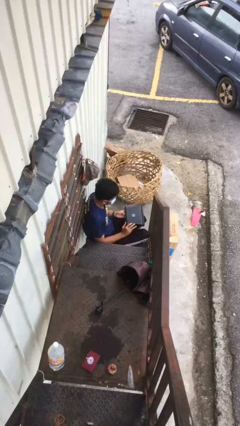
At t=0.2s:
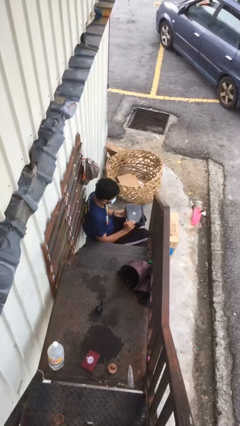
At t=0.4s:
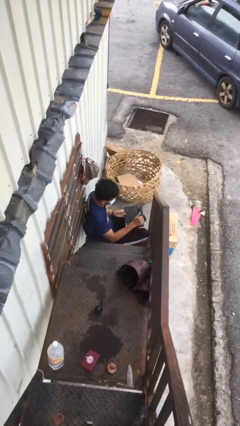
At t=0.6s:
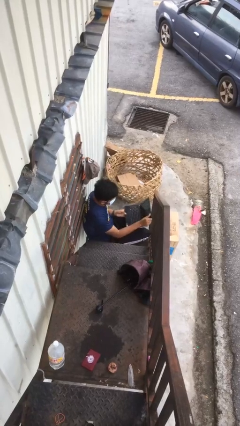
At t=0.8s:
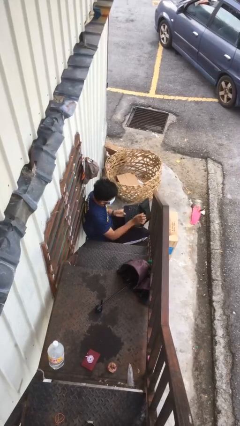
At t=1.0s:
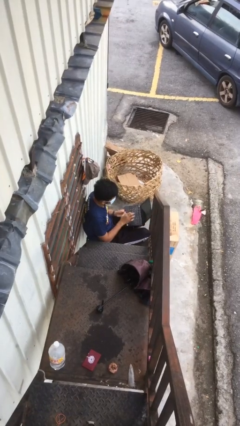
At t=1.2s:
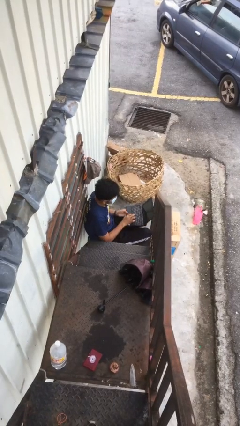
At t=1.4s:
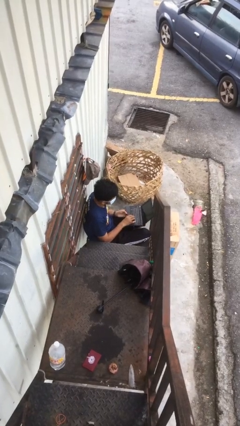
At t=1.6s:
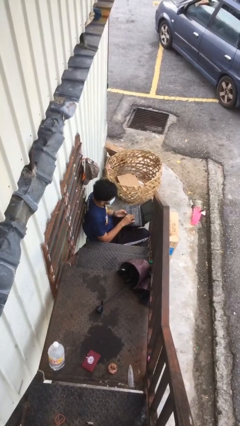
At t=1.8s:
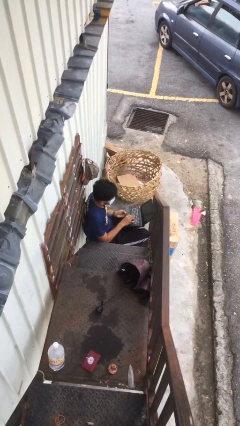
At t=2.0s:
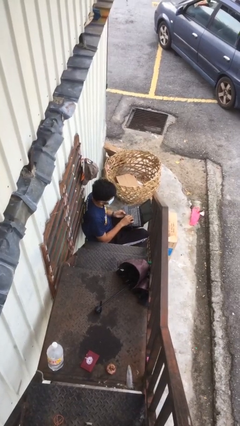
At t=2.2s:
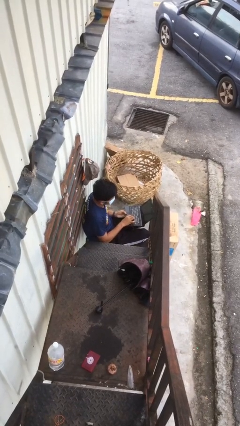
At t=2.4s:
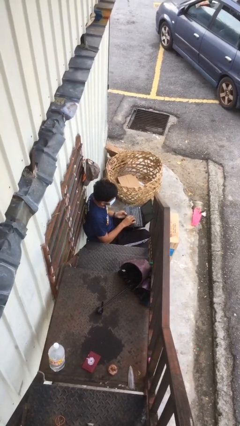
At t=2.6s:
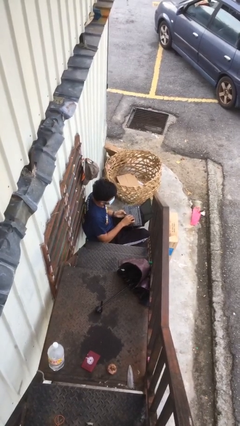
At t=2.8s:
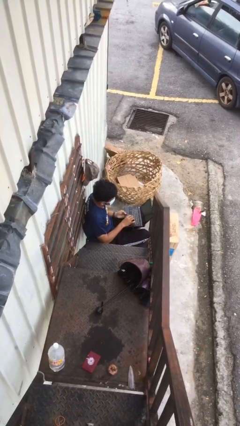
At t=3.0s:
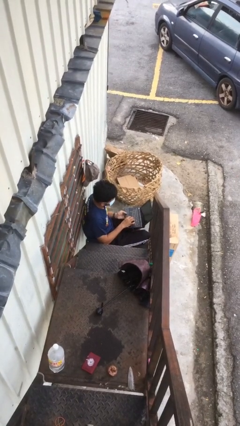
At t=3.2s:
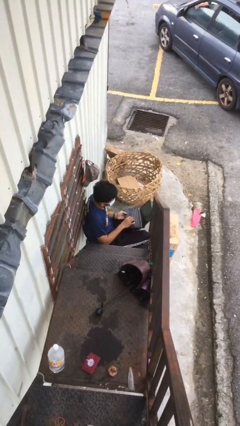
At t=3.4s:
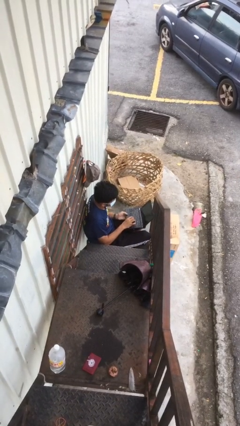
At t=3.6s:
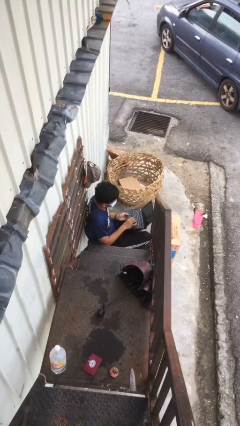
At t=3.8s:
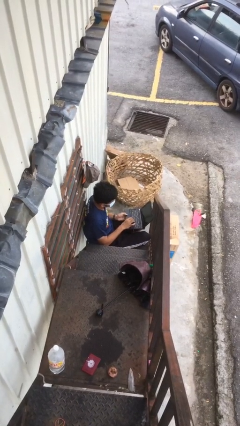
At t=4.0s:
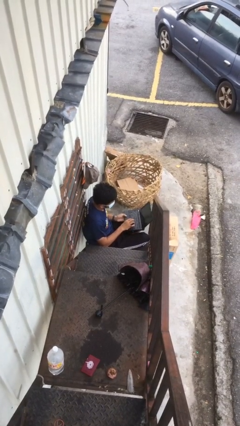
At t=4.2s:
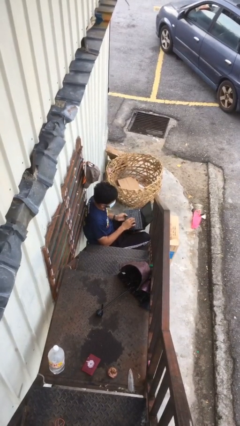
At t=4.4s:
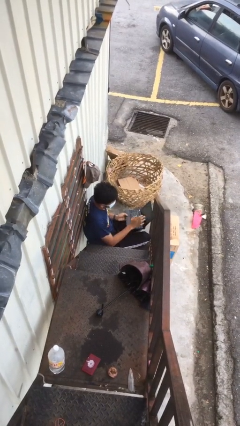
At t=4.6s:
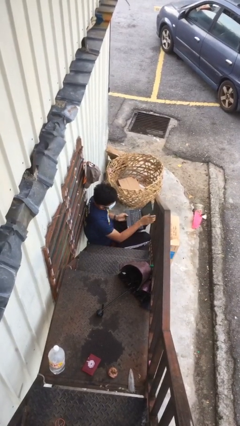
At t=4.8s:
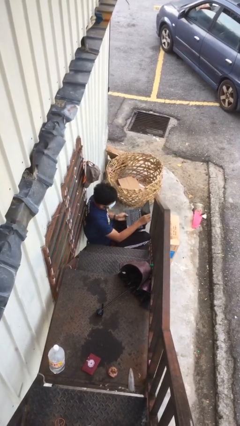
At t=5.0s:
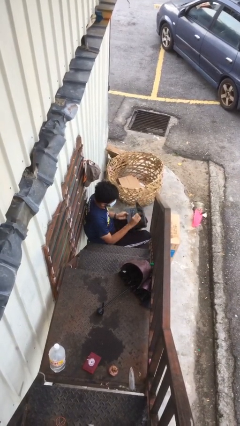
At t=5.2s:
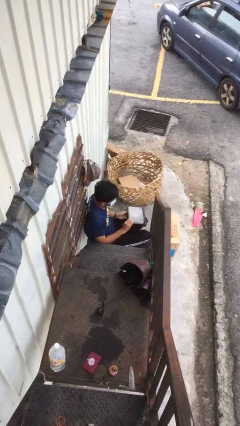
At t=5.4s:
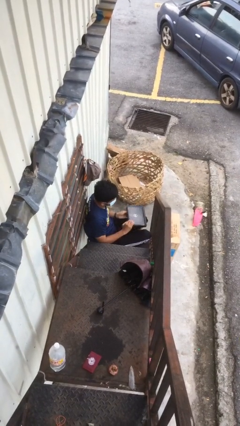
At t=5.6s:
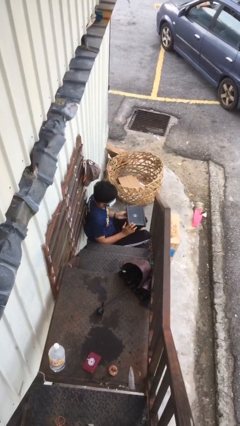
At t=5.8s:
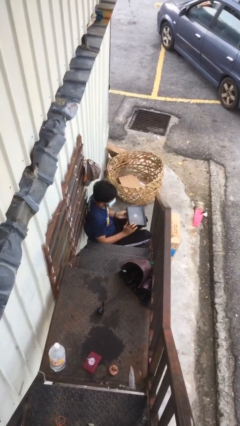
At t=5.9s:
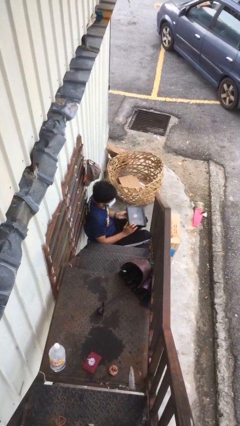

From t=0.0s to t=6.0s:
person interacts with laptop

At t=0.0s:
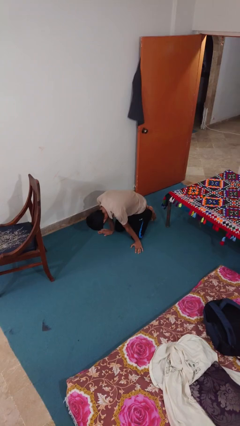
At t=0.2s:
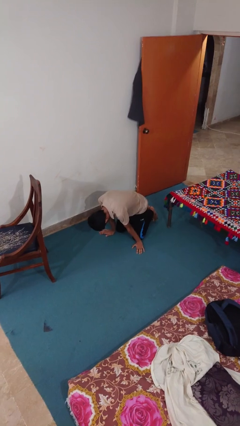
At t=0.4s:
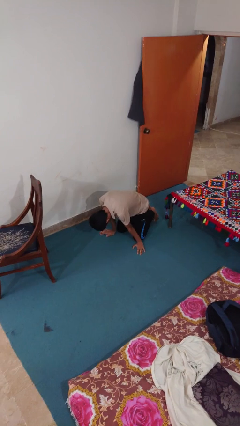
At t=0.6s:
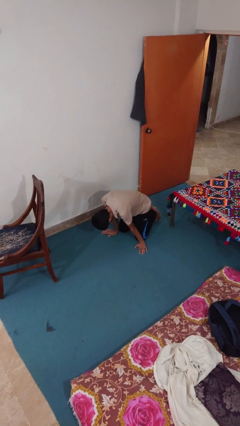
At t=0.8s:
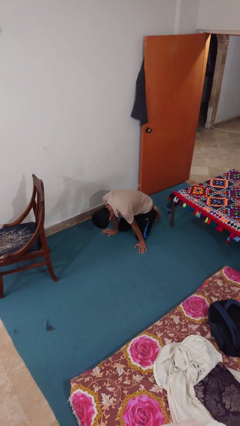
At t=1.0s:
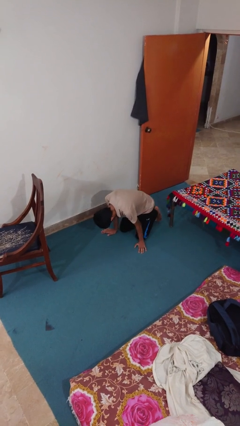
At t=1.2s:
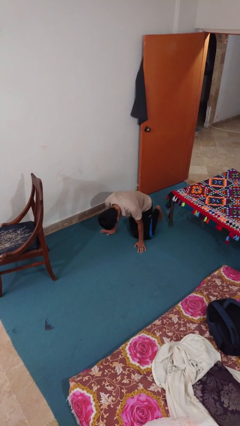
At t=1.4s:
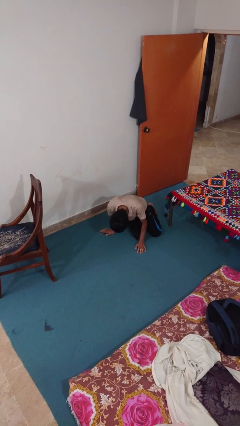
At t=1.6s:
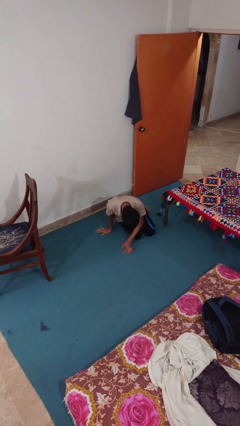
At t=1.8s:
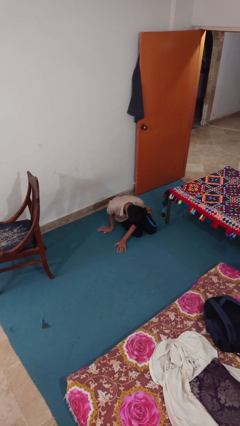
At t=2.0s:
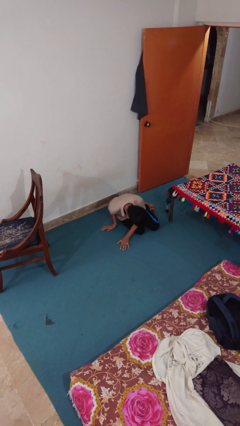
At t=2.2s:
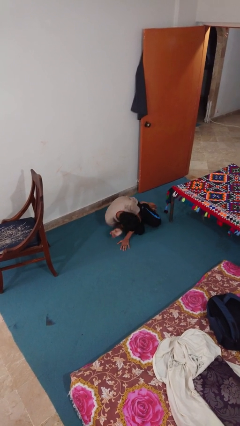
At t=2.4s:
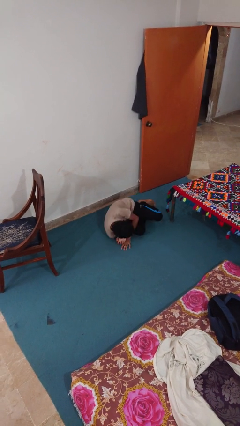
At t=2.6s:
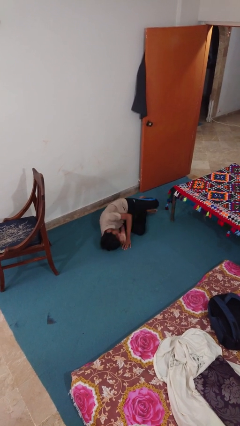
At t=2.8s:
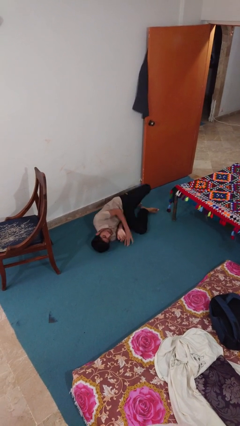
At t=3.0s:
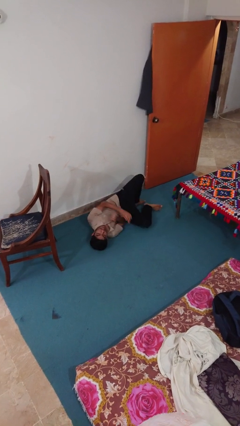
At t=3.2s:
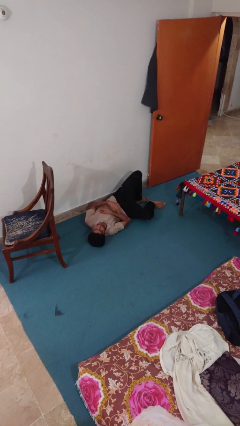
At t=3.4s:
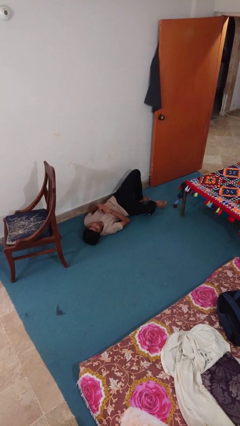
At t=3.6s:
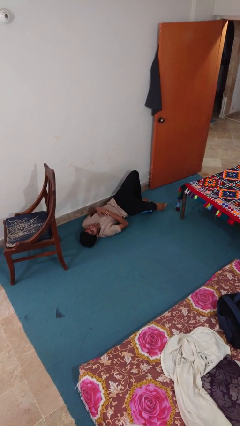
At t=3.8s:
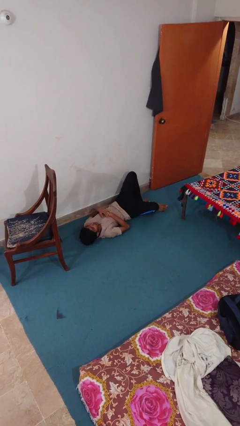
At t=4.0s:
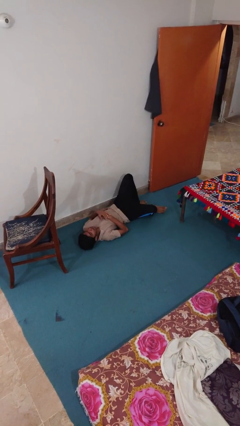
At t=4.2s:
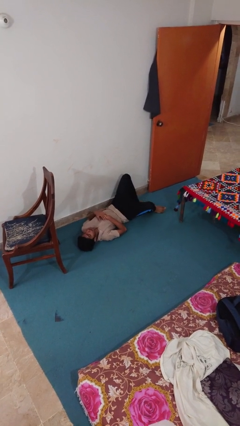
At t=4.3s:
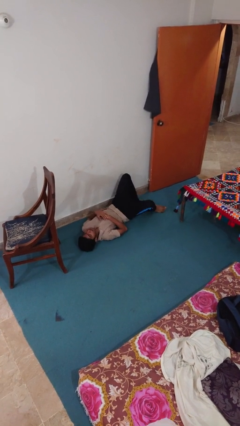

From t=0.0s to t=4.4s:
person lies down on floor

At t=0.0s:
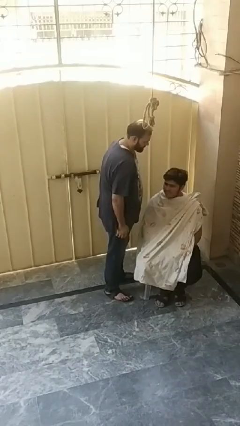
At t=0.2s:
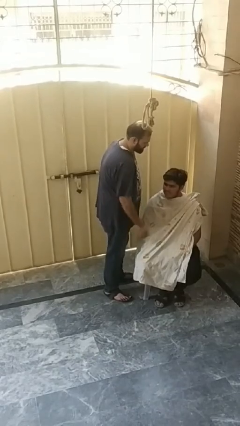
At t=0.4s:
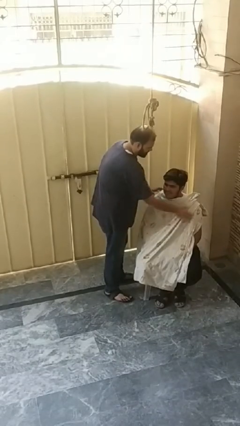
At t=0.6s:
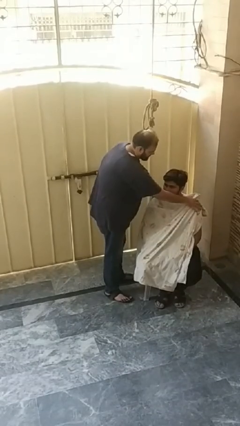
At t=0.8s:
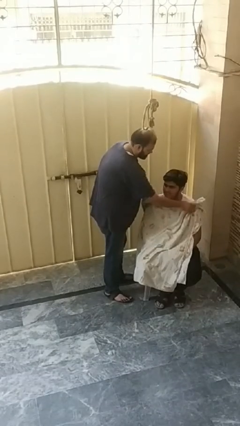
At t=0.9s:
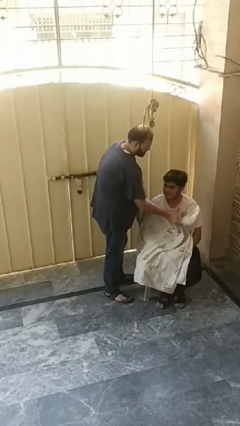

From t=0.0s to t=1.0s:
person uncovers friend with blanket

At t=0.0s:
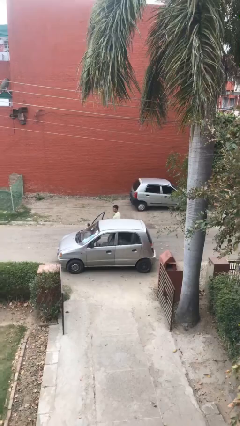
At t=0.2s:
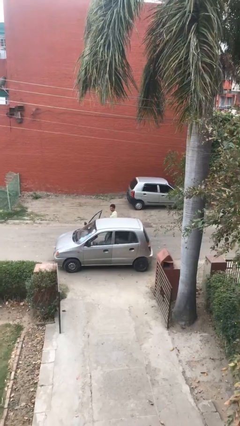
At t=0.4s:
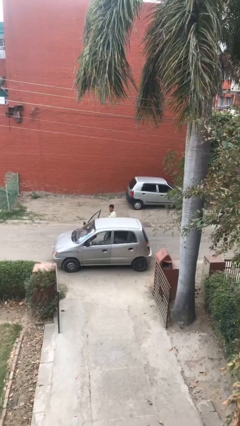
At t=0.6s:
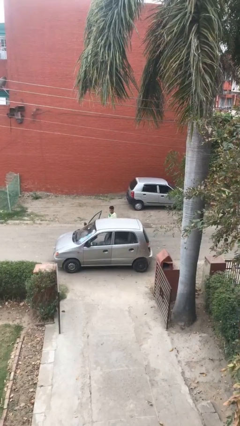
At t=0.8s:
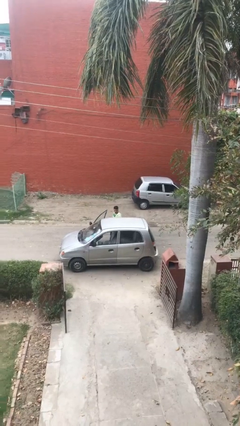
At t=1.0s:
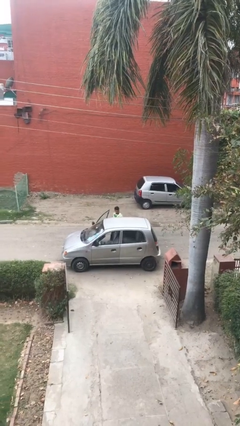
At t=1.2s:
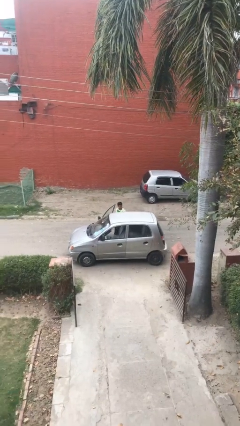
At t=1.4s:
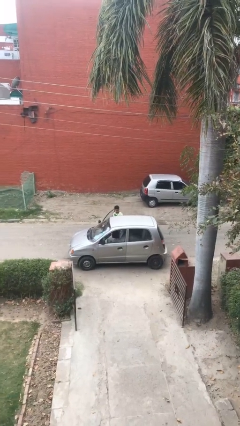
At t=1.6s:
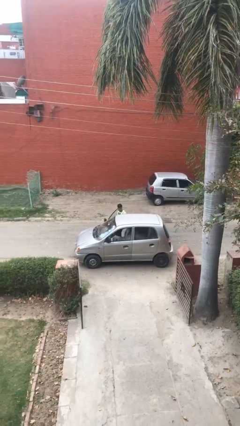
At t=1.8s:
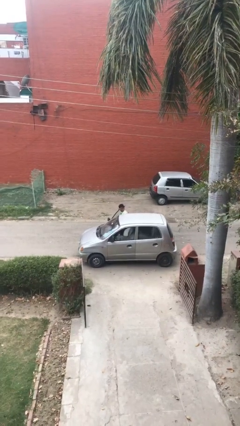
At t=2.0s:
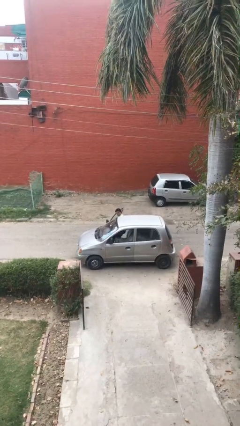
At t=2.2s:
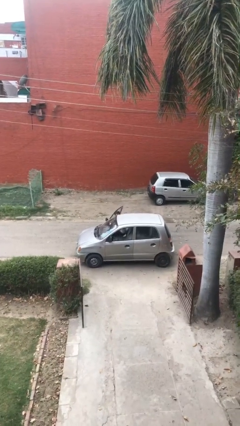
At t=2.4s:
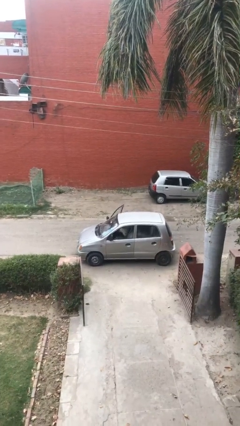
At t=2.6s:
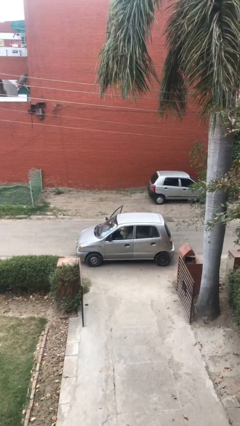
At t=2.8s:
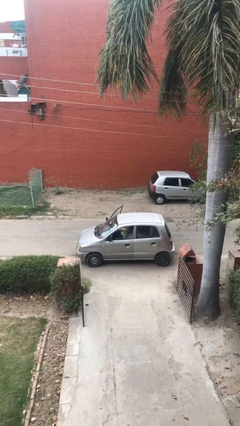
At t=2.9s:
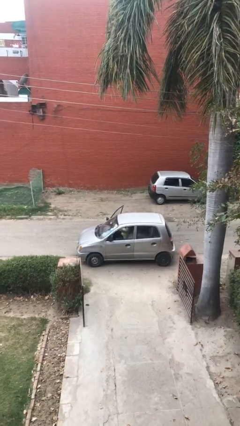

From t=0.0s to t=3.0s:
person enters car

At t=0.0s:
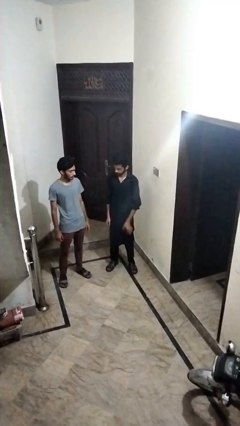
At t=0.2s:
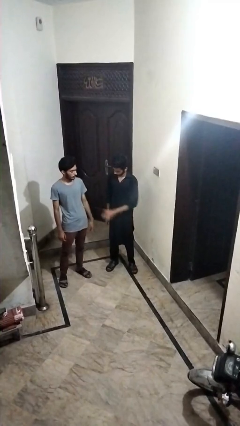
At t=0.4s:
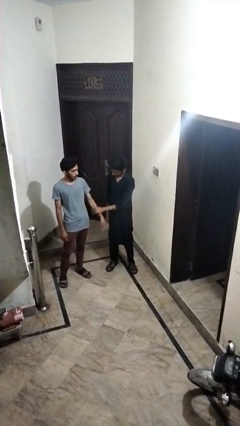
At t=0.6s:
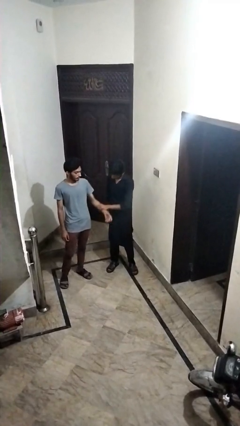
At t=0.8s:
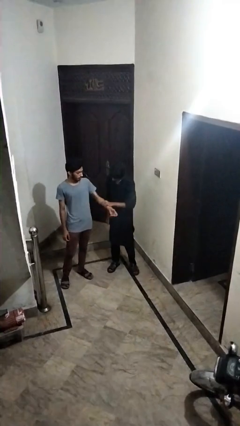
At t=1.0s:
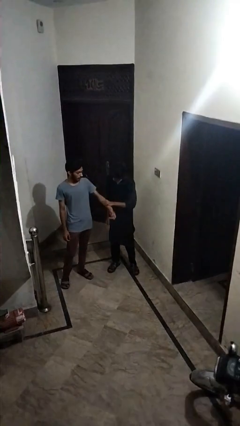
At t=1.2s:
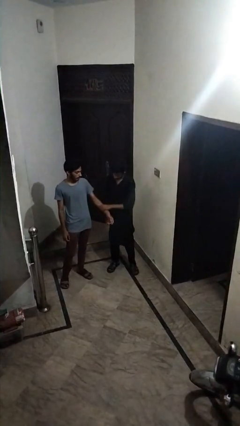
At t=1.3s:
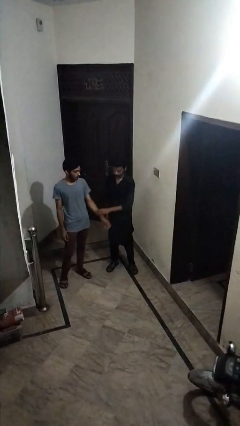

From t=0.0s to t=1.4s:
person grabs person by forearm

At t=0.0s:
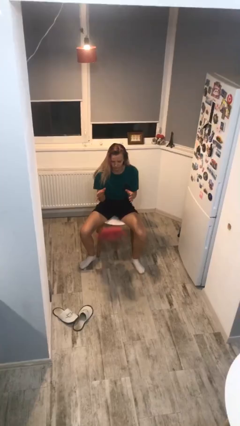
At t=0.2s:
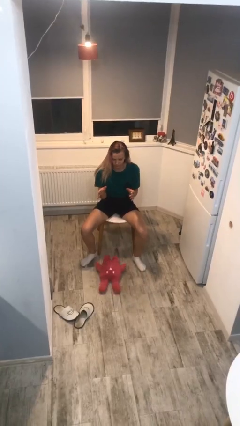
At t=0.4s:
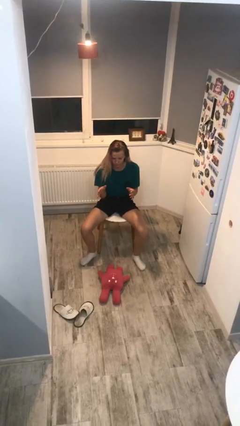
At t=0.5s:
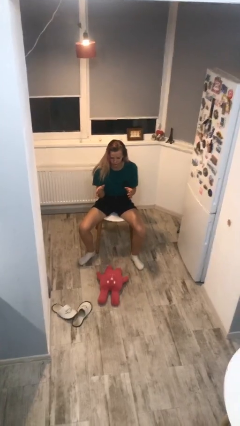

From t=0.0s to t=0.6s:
person drops object

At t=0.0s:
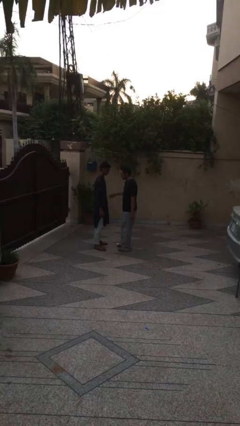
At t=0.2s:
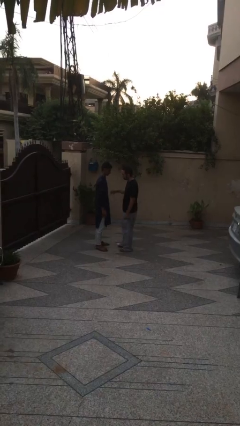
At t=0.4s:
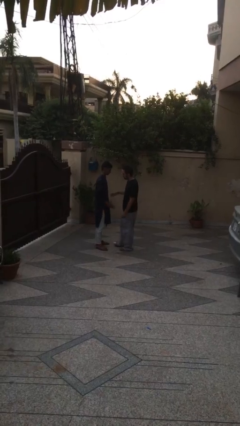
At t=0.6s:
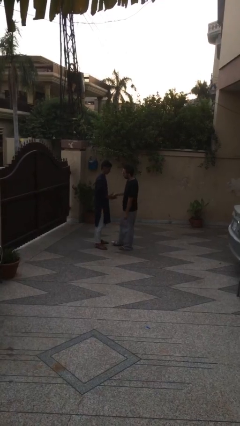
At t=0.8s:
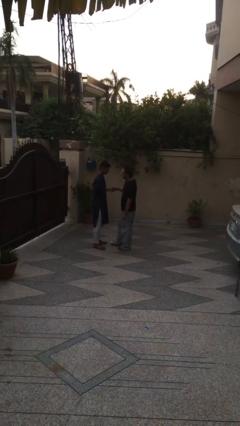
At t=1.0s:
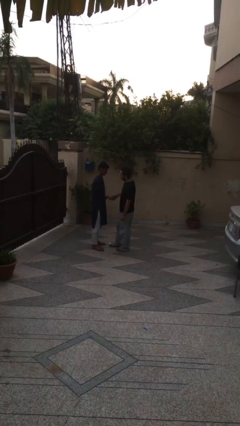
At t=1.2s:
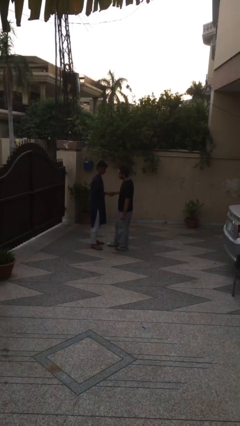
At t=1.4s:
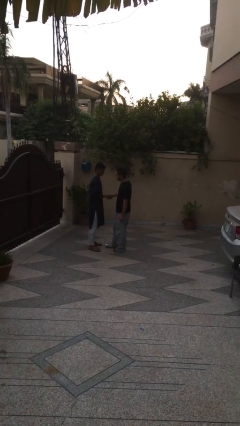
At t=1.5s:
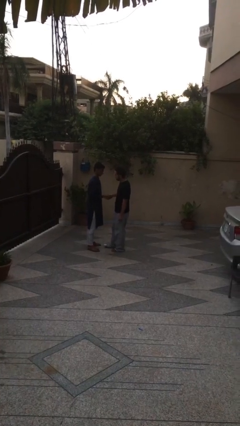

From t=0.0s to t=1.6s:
person shakes hand
